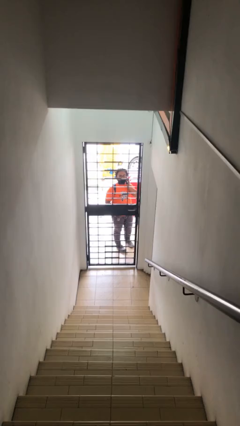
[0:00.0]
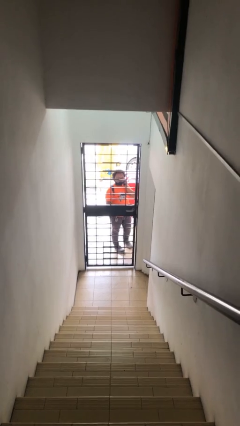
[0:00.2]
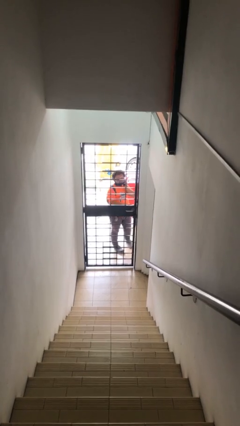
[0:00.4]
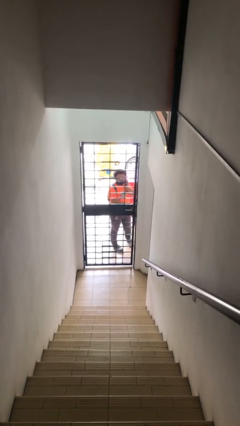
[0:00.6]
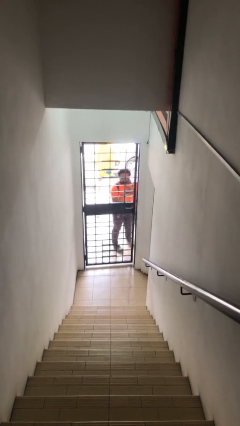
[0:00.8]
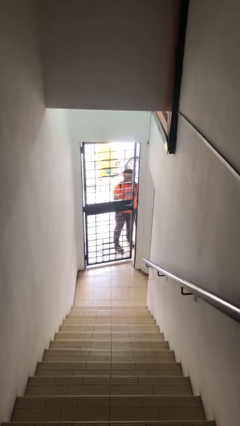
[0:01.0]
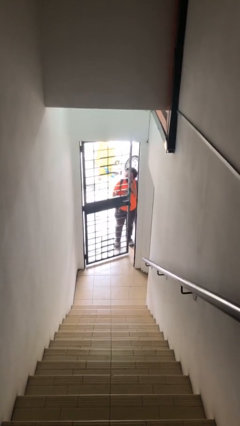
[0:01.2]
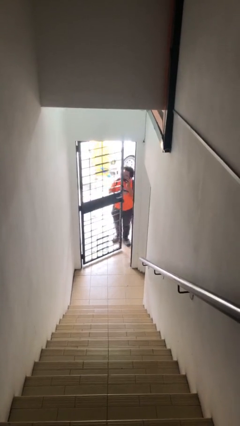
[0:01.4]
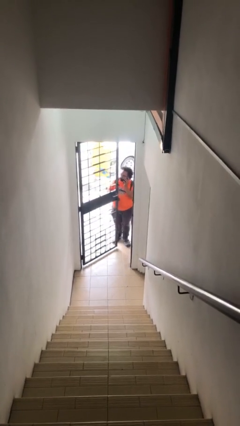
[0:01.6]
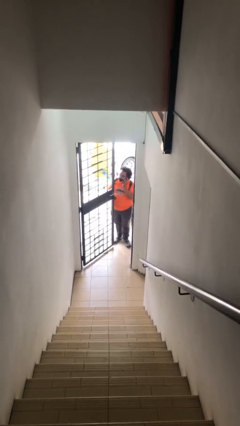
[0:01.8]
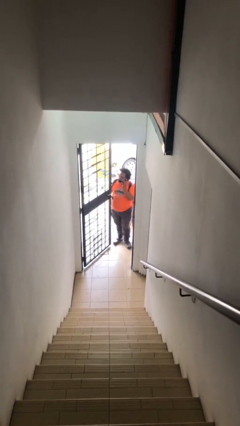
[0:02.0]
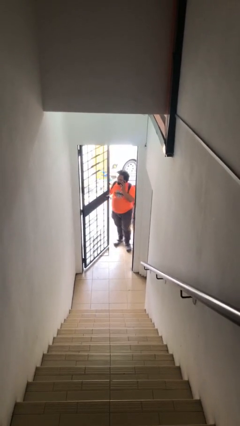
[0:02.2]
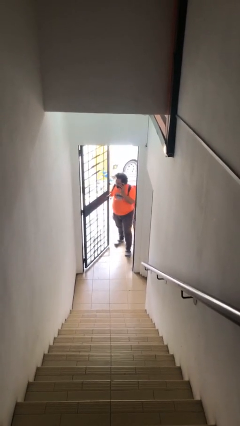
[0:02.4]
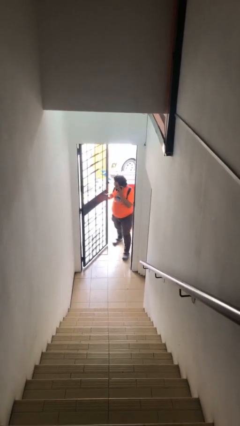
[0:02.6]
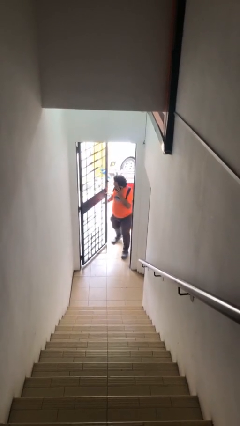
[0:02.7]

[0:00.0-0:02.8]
person opens facility door

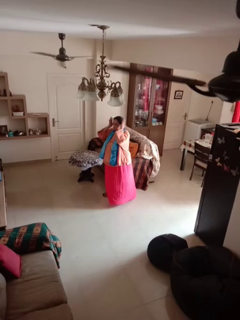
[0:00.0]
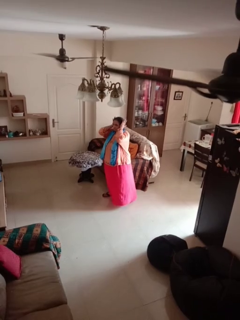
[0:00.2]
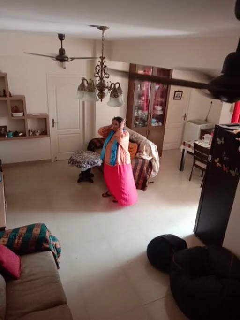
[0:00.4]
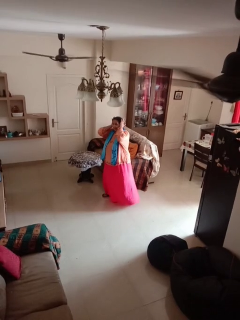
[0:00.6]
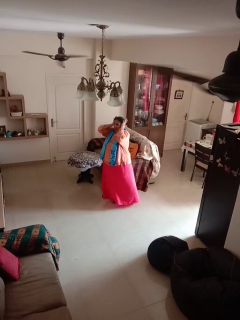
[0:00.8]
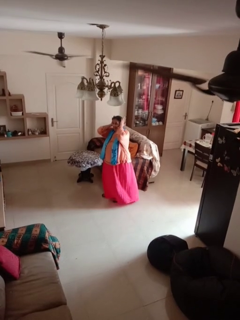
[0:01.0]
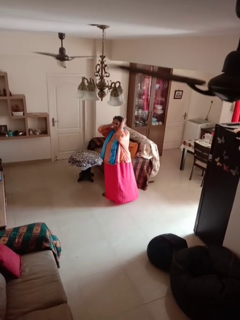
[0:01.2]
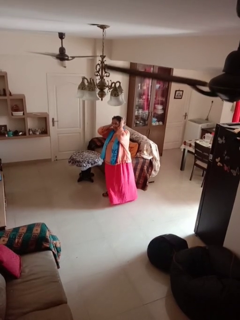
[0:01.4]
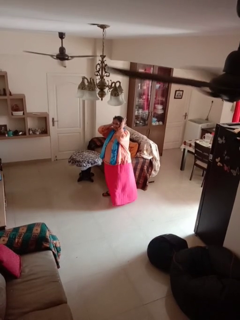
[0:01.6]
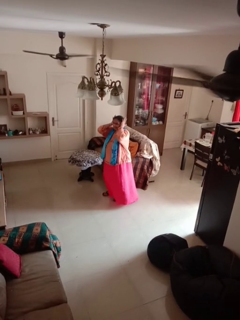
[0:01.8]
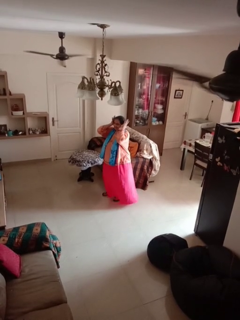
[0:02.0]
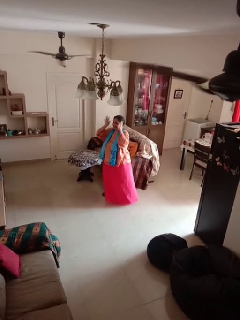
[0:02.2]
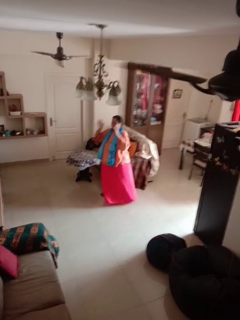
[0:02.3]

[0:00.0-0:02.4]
person puts fingers in ear

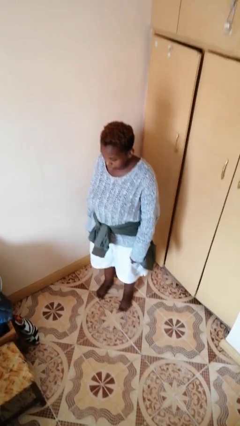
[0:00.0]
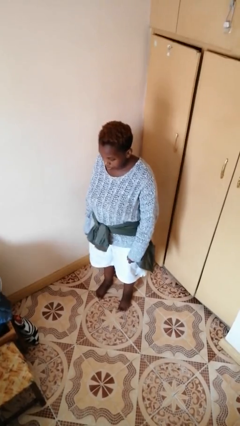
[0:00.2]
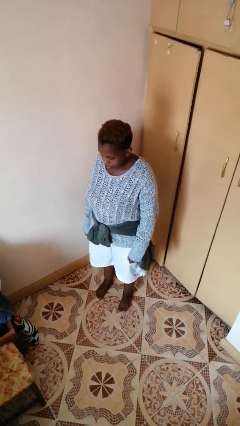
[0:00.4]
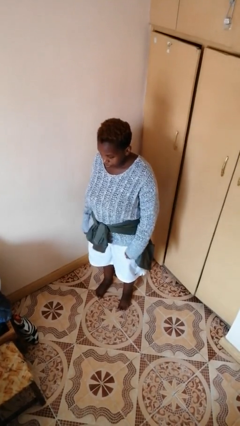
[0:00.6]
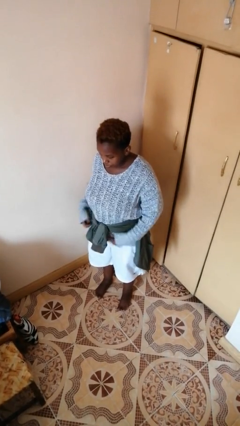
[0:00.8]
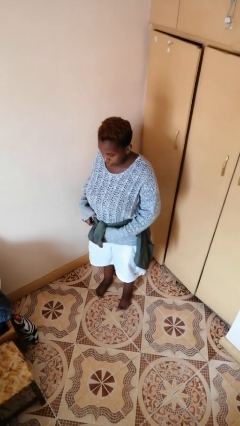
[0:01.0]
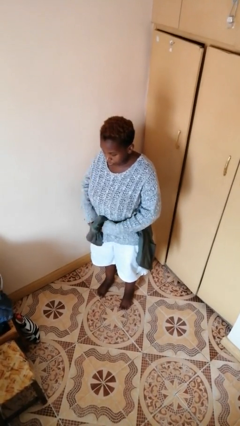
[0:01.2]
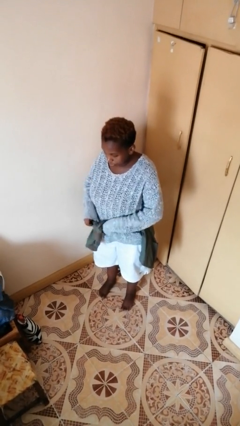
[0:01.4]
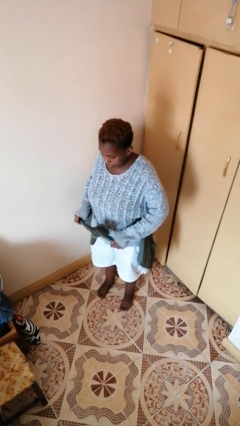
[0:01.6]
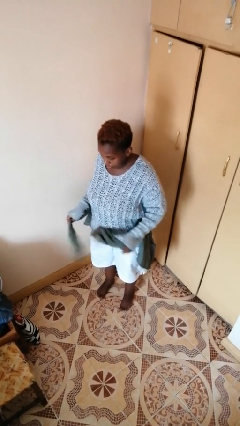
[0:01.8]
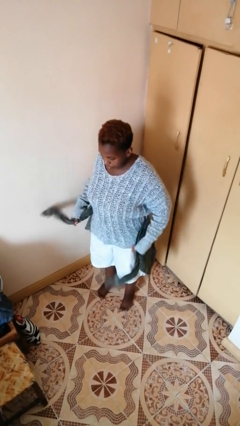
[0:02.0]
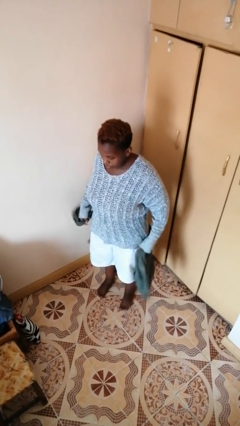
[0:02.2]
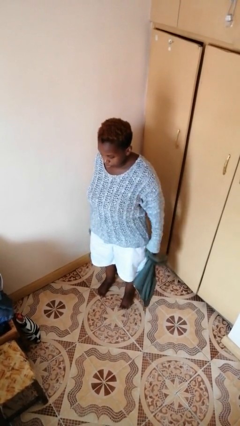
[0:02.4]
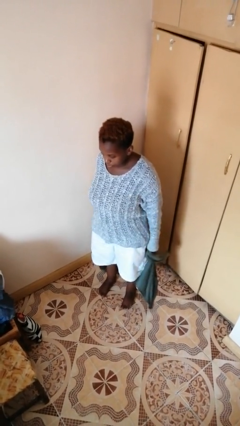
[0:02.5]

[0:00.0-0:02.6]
person unties jacket around waist

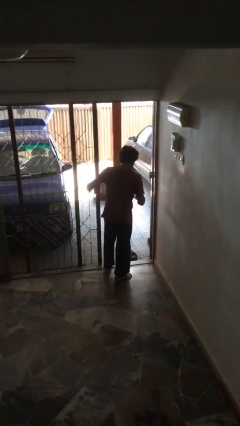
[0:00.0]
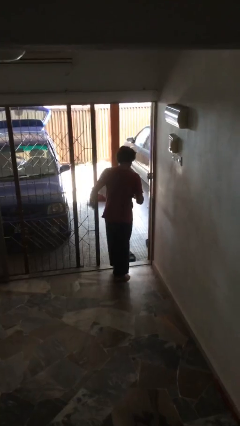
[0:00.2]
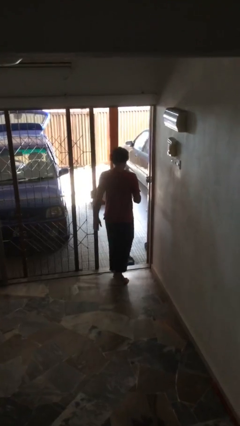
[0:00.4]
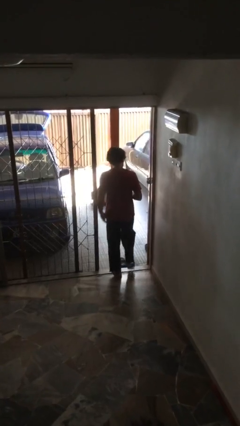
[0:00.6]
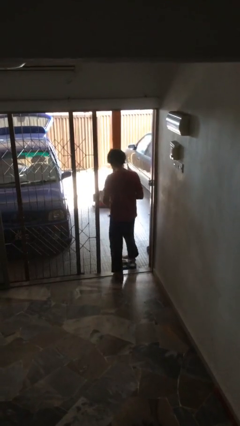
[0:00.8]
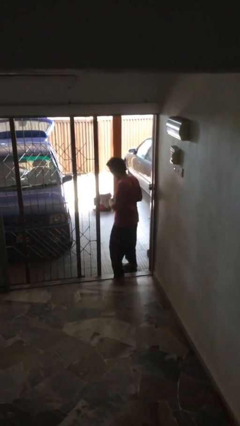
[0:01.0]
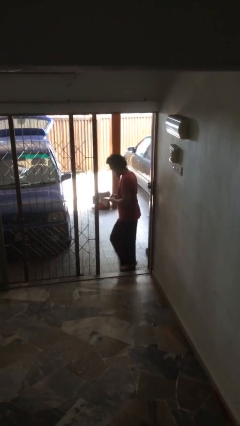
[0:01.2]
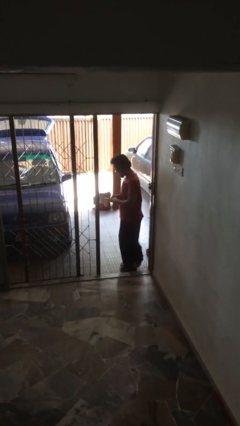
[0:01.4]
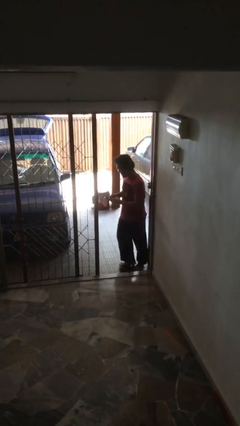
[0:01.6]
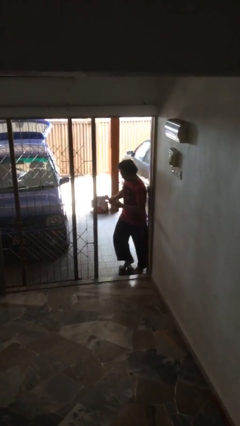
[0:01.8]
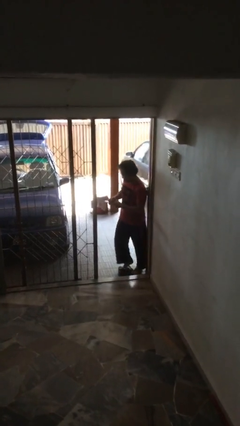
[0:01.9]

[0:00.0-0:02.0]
person exits scene through structure

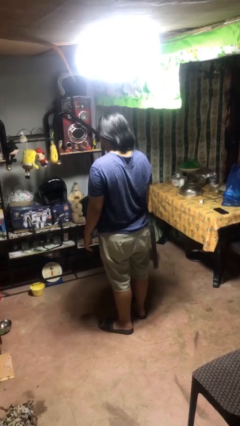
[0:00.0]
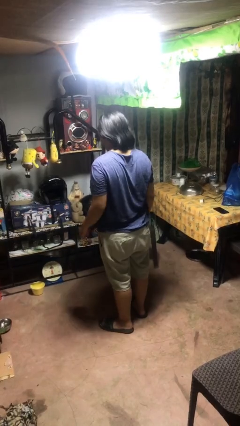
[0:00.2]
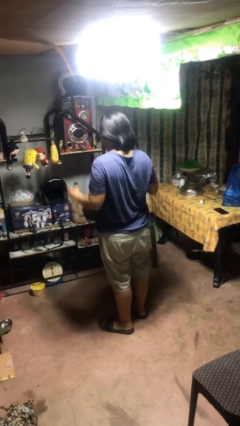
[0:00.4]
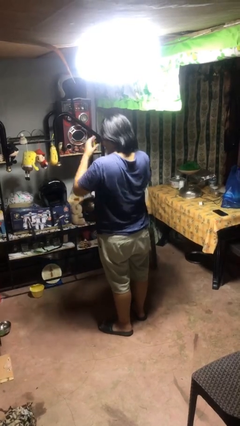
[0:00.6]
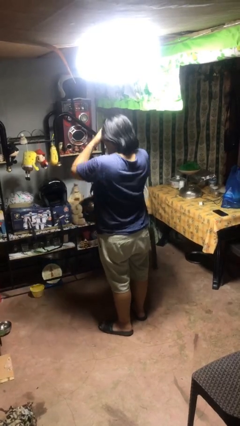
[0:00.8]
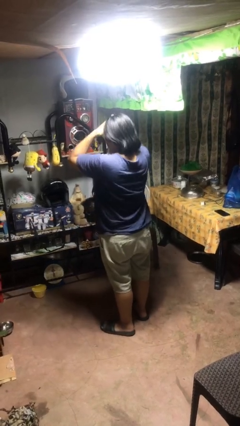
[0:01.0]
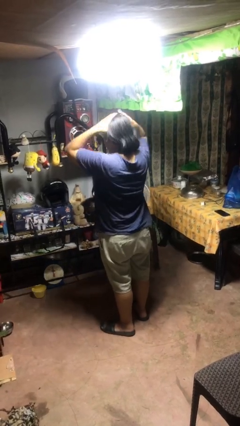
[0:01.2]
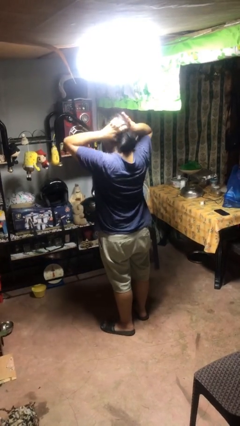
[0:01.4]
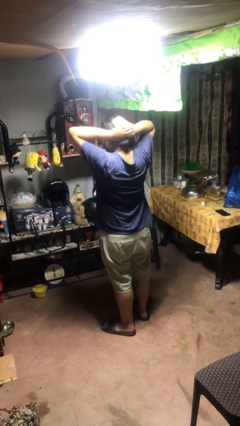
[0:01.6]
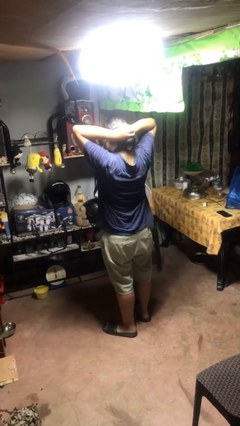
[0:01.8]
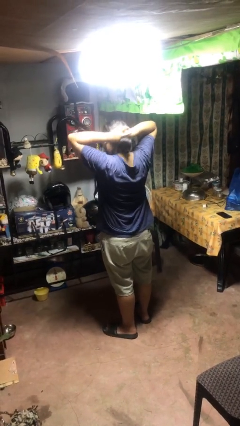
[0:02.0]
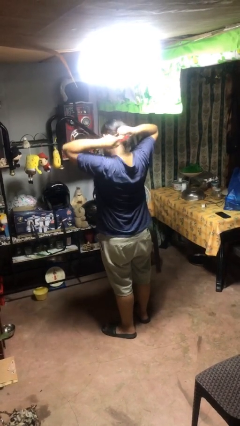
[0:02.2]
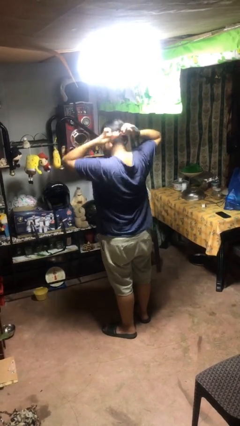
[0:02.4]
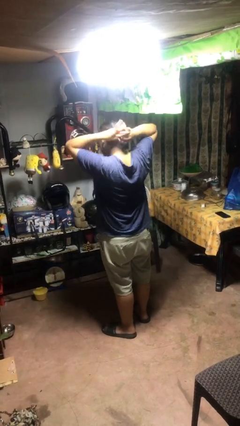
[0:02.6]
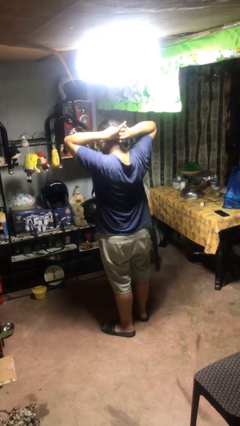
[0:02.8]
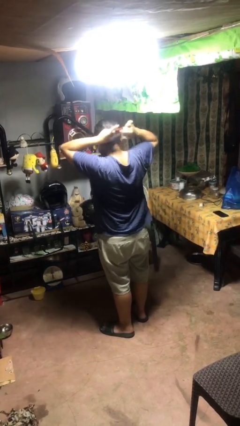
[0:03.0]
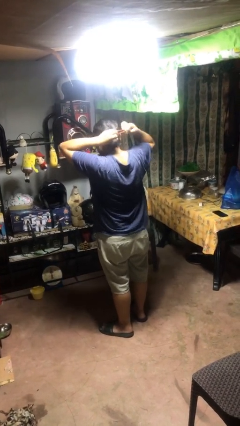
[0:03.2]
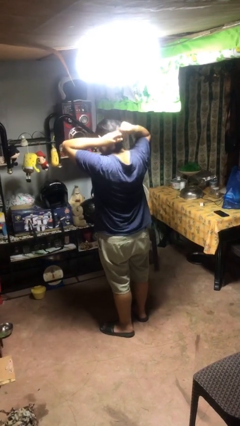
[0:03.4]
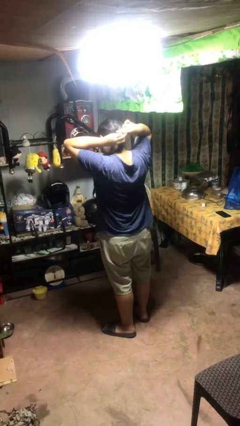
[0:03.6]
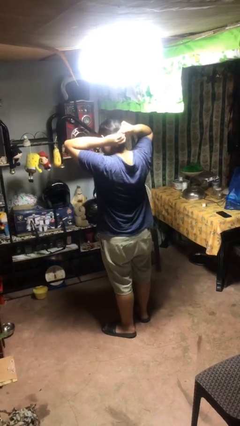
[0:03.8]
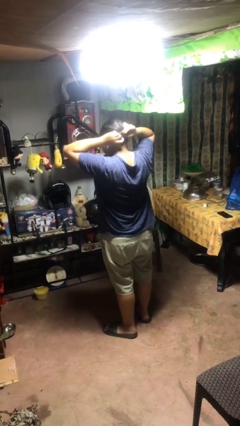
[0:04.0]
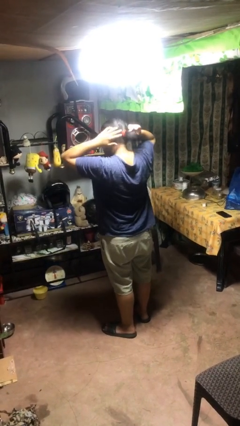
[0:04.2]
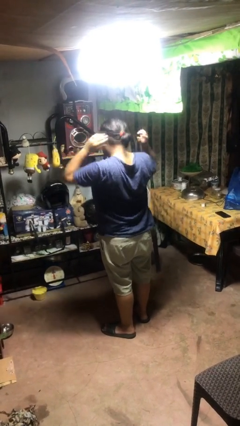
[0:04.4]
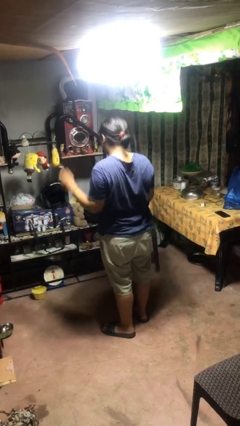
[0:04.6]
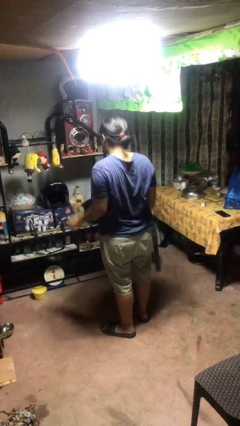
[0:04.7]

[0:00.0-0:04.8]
person puts hair in ponytail

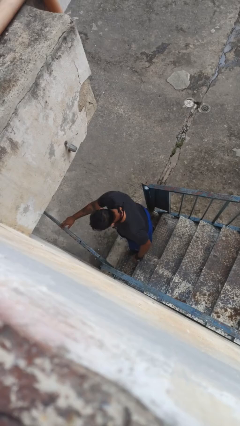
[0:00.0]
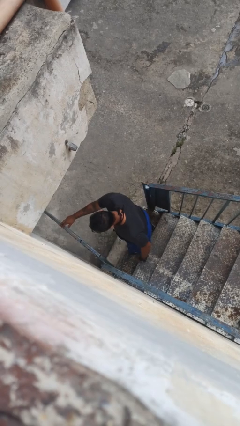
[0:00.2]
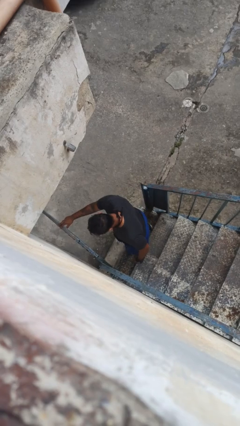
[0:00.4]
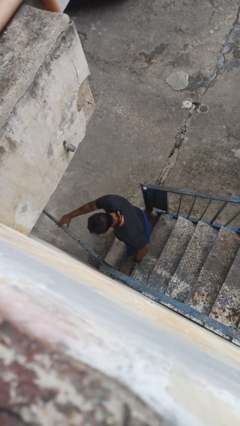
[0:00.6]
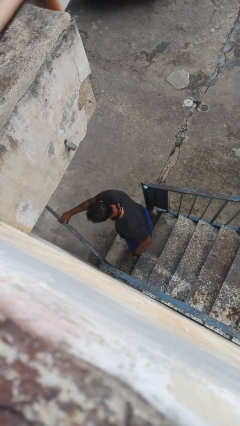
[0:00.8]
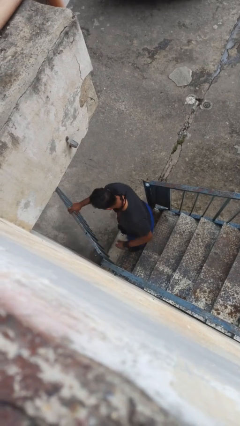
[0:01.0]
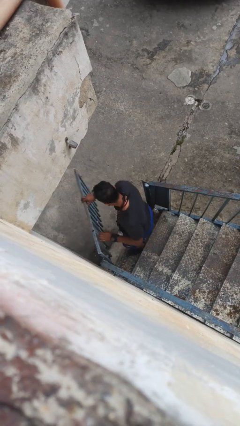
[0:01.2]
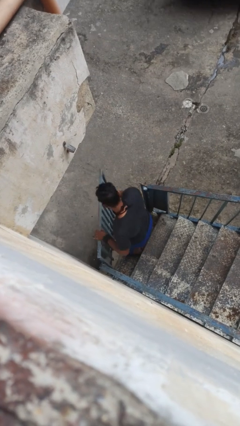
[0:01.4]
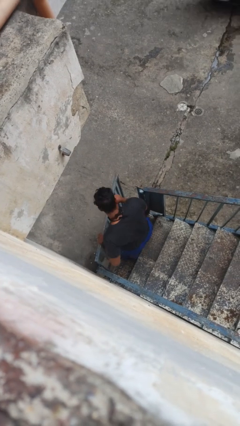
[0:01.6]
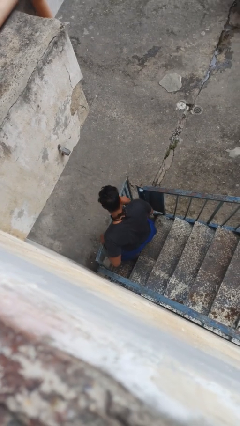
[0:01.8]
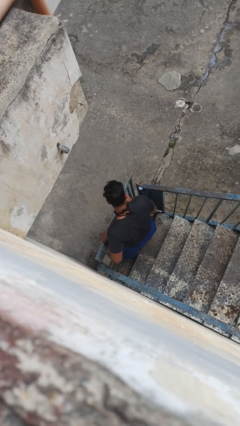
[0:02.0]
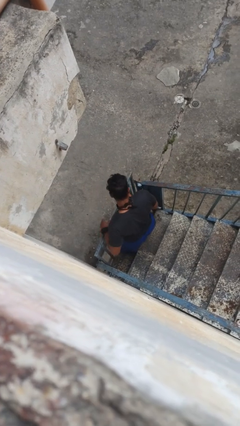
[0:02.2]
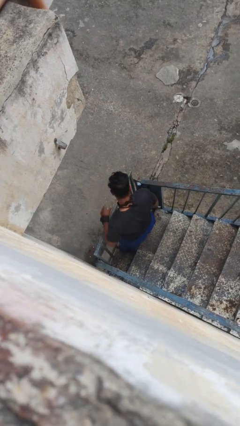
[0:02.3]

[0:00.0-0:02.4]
person closes facility door

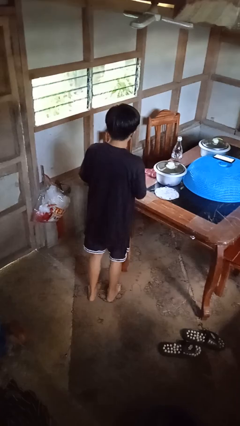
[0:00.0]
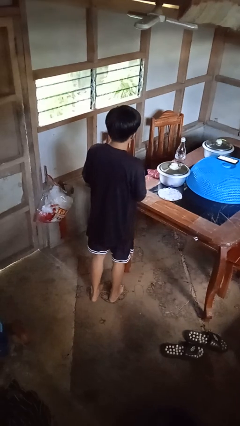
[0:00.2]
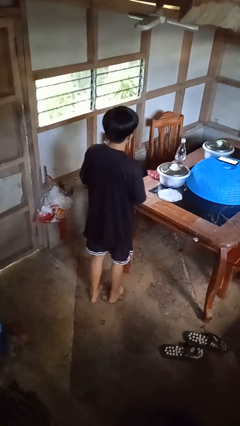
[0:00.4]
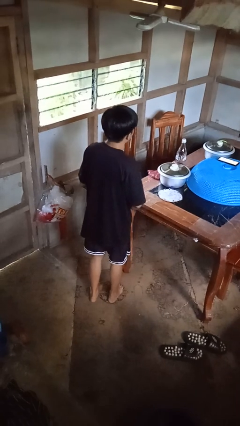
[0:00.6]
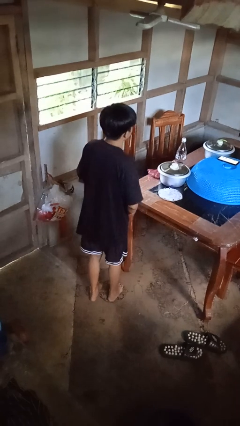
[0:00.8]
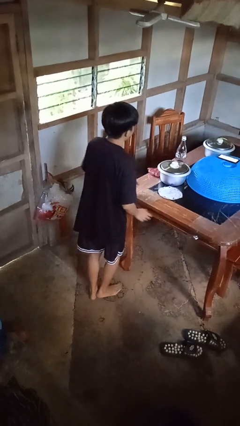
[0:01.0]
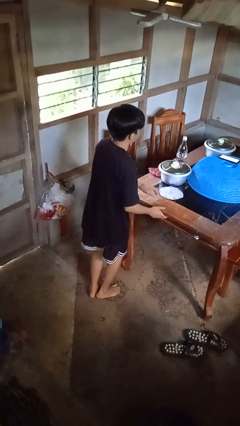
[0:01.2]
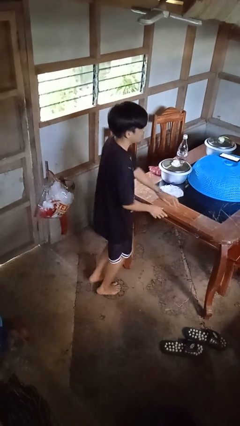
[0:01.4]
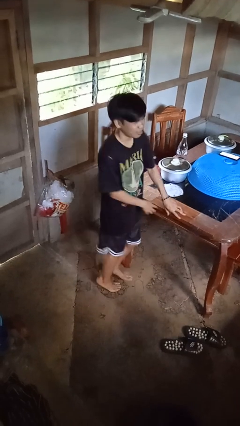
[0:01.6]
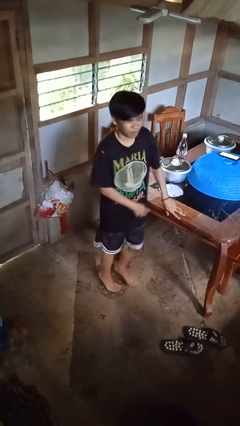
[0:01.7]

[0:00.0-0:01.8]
person twirls
